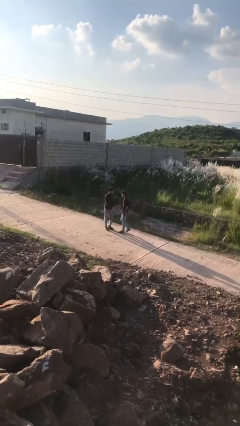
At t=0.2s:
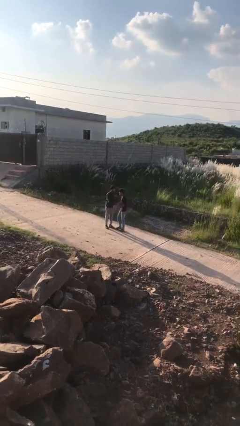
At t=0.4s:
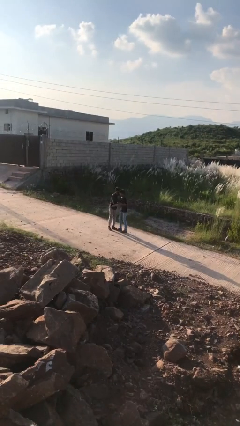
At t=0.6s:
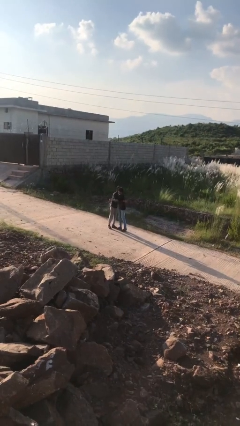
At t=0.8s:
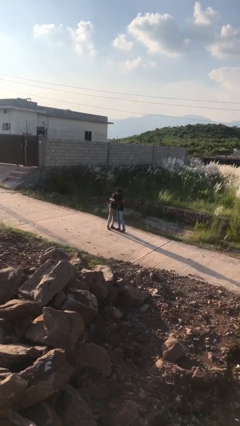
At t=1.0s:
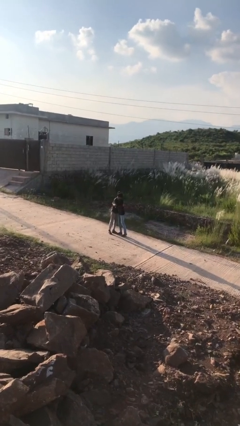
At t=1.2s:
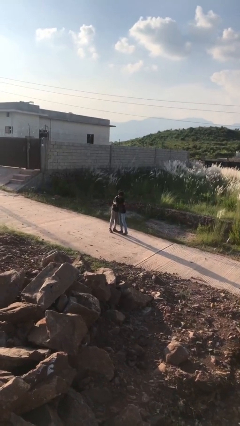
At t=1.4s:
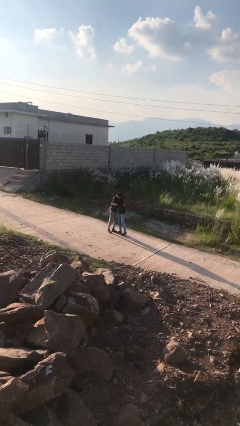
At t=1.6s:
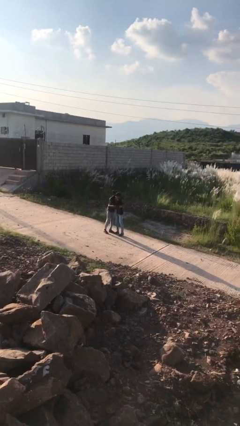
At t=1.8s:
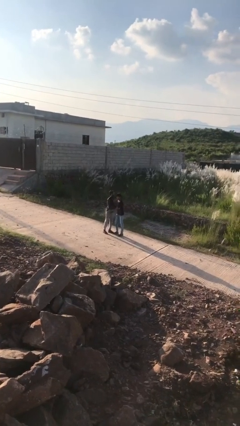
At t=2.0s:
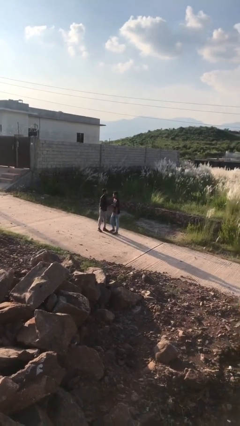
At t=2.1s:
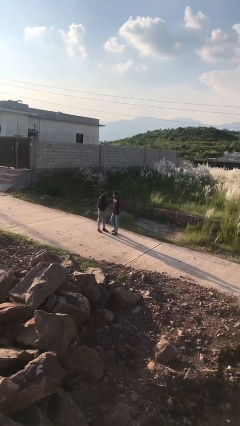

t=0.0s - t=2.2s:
person embraces person

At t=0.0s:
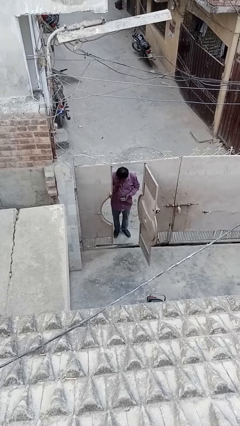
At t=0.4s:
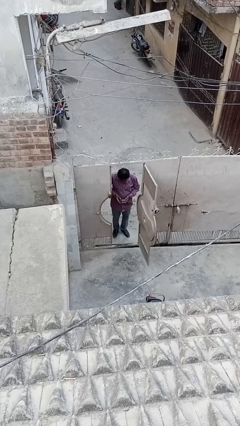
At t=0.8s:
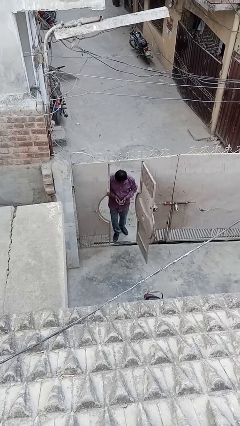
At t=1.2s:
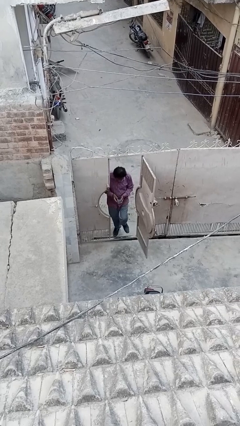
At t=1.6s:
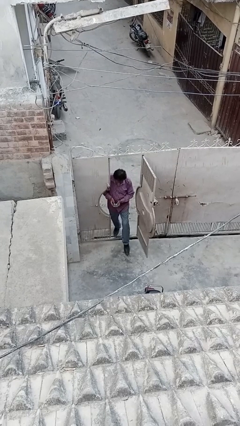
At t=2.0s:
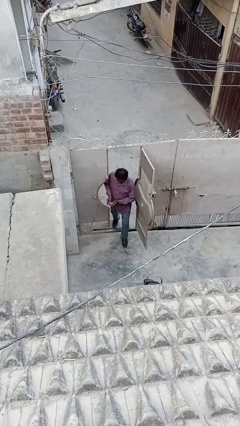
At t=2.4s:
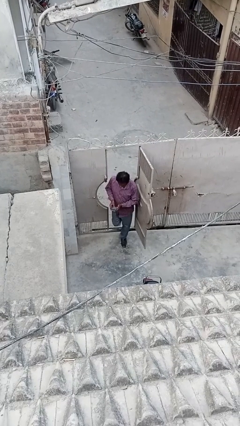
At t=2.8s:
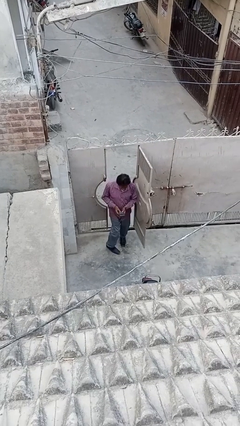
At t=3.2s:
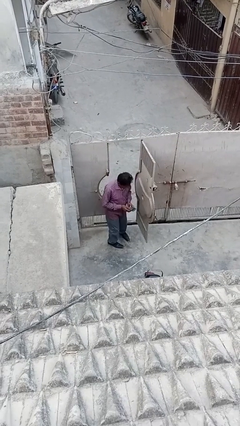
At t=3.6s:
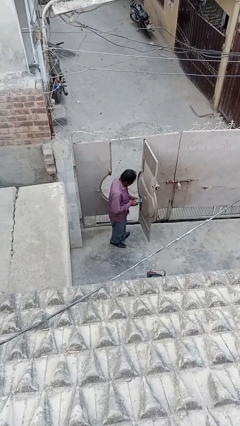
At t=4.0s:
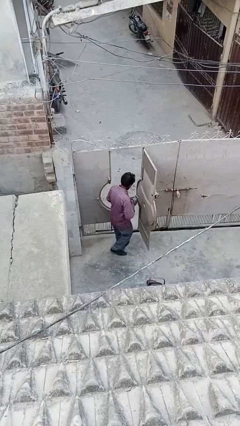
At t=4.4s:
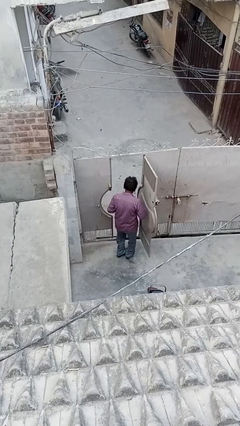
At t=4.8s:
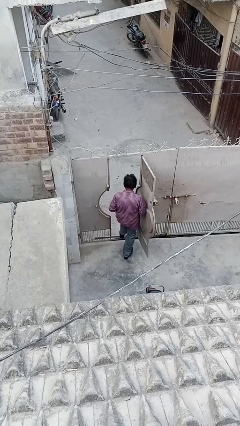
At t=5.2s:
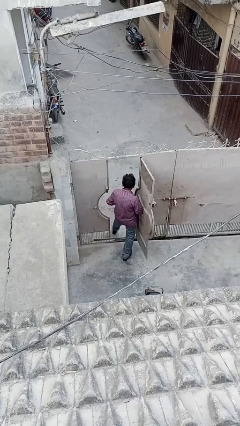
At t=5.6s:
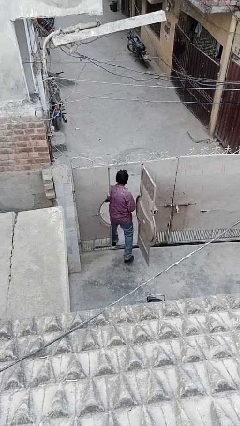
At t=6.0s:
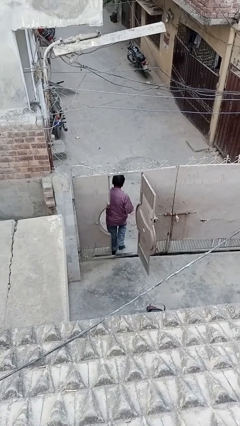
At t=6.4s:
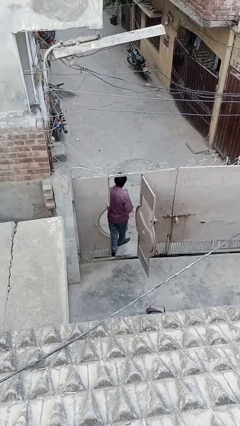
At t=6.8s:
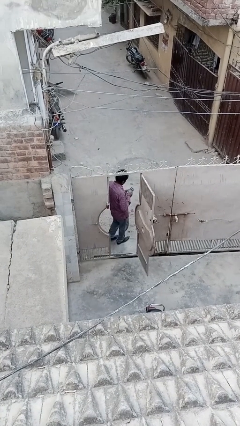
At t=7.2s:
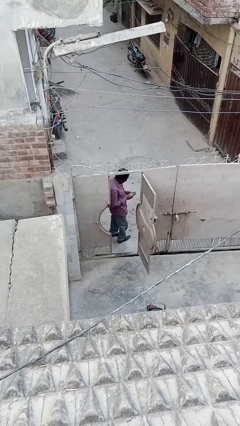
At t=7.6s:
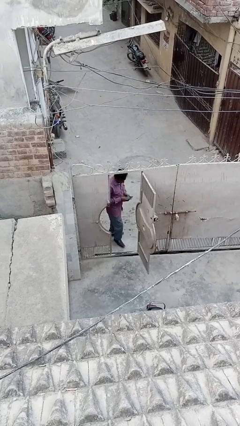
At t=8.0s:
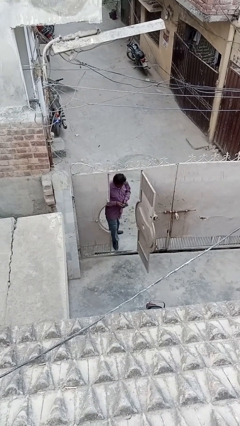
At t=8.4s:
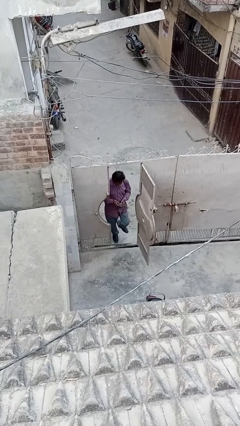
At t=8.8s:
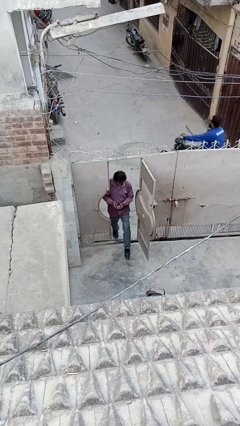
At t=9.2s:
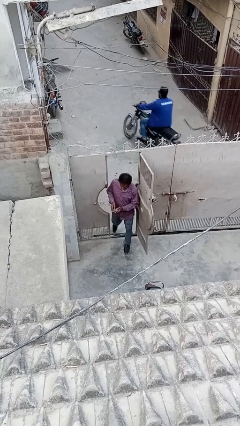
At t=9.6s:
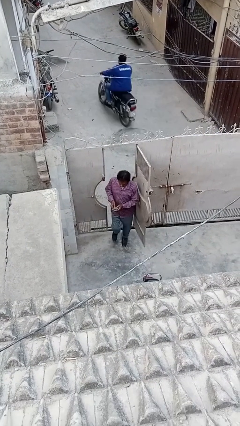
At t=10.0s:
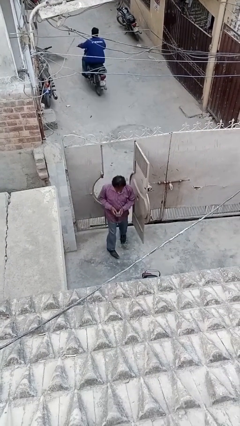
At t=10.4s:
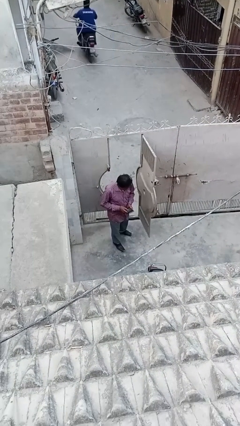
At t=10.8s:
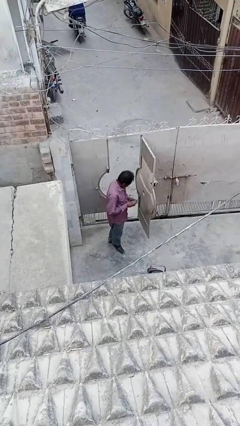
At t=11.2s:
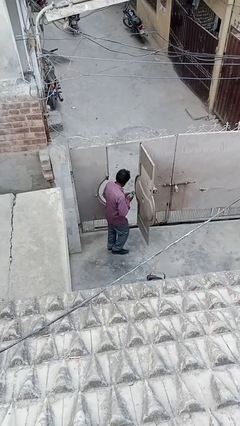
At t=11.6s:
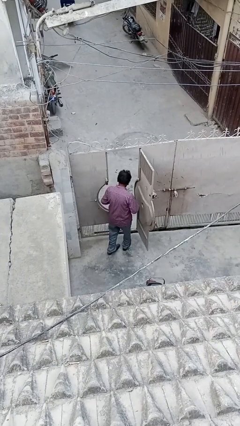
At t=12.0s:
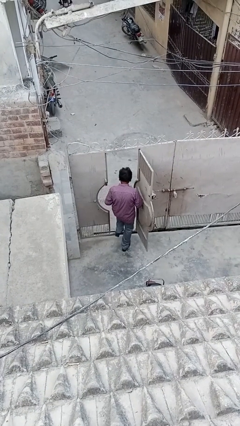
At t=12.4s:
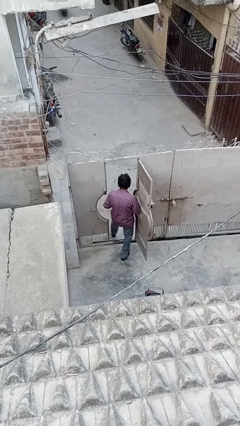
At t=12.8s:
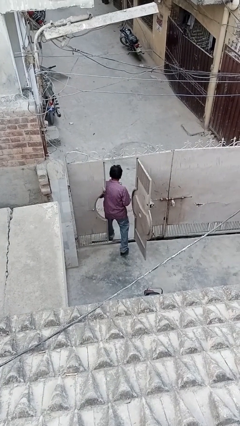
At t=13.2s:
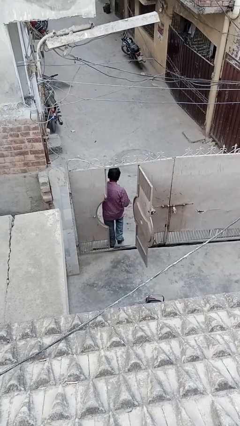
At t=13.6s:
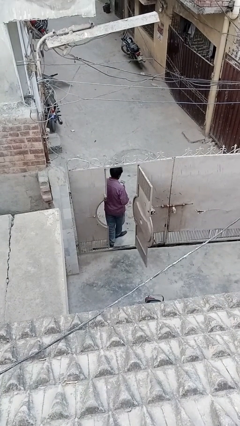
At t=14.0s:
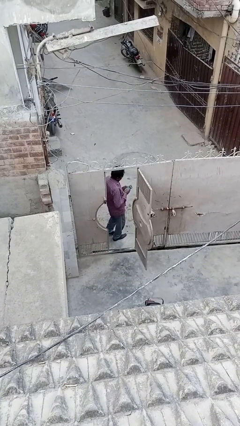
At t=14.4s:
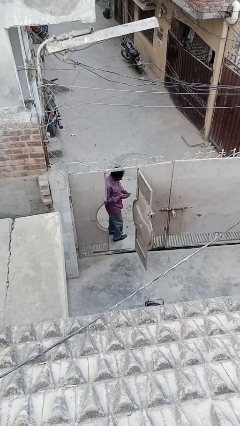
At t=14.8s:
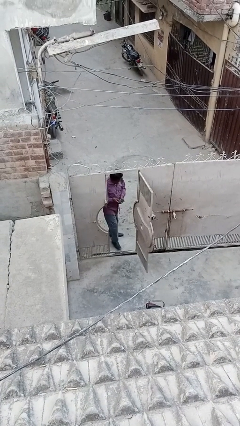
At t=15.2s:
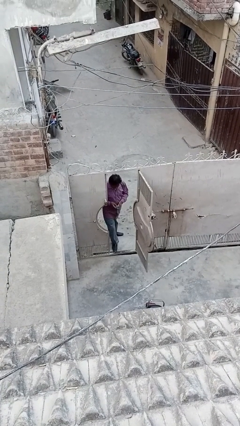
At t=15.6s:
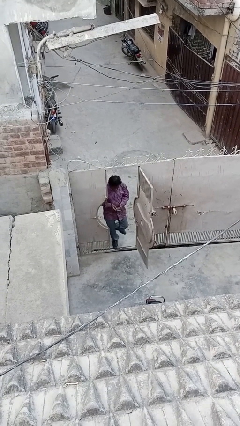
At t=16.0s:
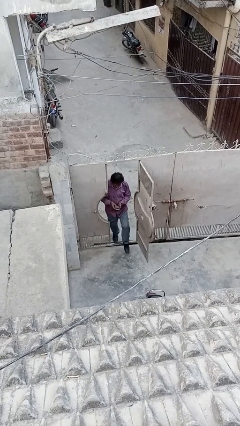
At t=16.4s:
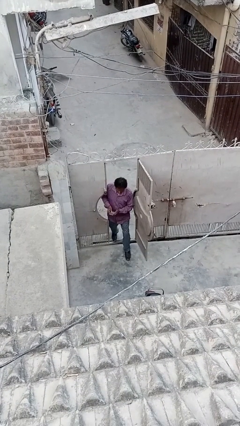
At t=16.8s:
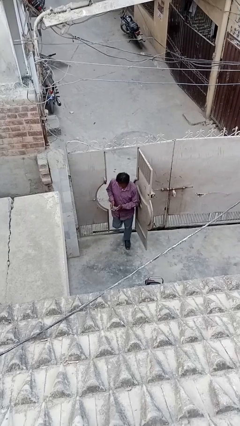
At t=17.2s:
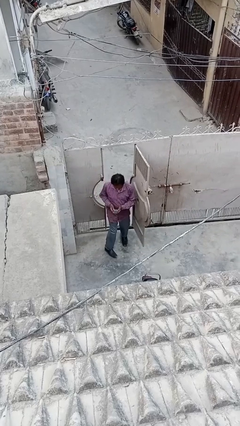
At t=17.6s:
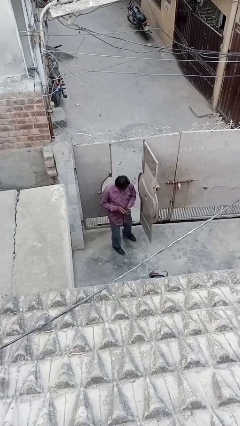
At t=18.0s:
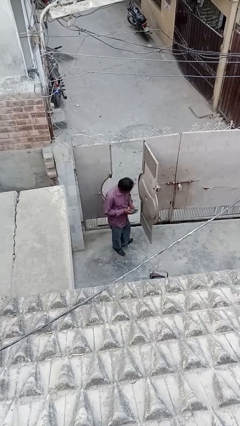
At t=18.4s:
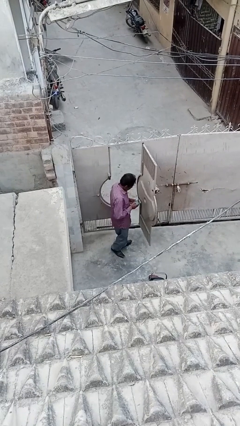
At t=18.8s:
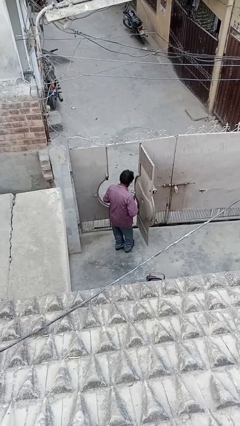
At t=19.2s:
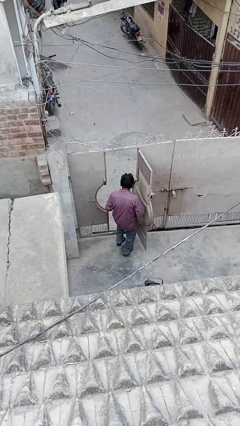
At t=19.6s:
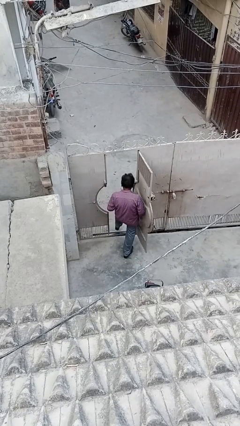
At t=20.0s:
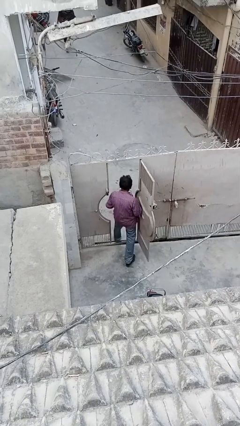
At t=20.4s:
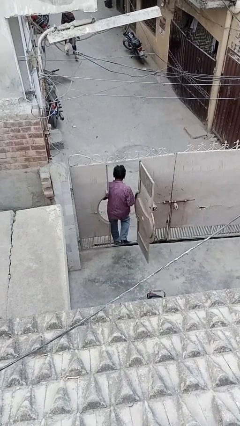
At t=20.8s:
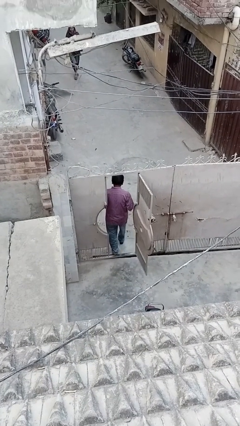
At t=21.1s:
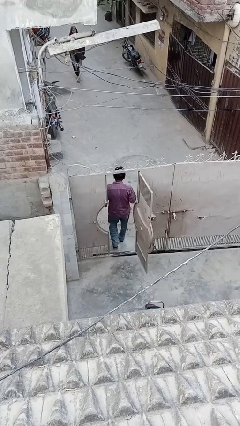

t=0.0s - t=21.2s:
person texts on phone

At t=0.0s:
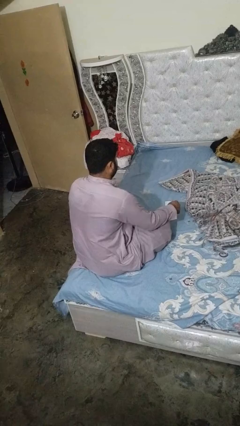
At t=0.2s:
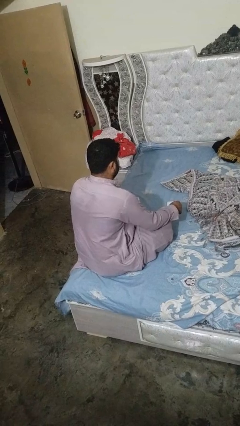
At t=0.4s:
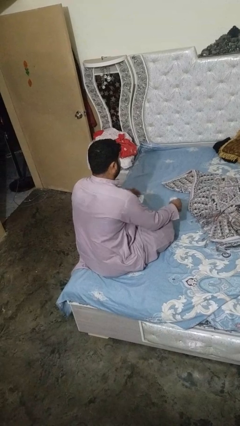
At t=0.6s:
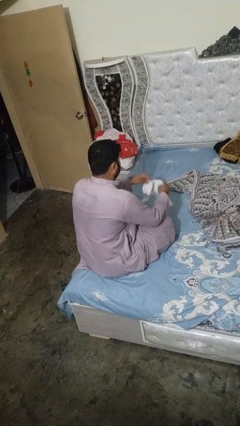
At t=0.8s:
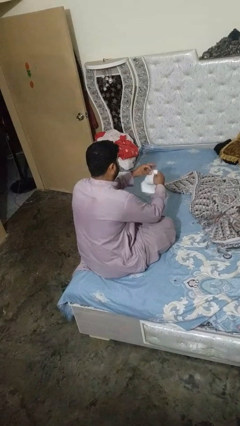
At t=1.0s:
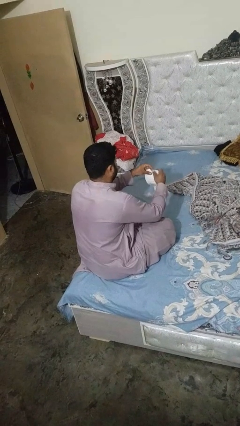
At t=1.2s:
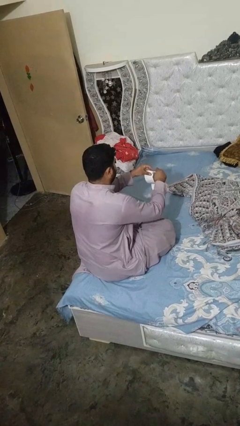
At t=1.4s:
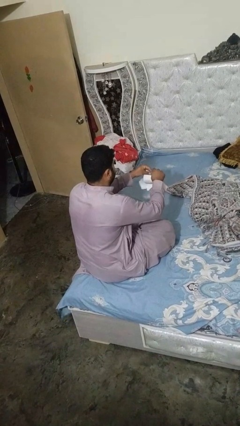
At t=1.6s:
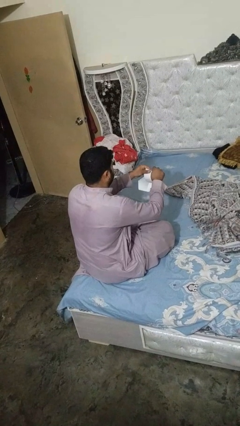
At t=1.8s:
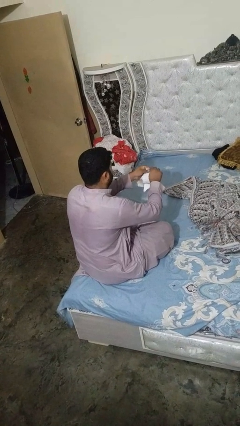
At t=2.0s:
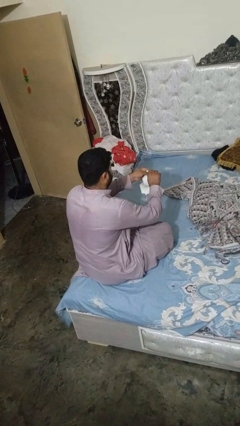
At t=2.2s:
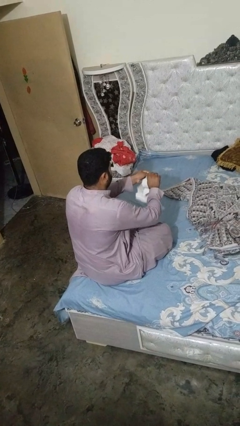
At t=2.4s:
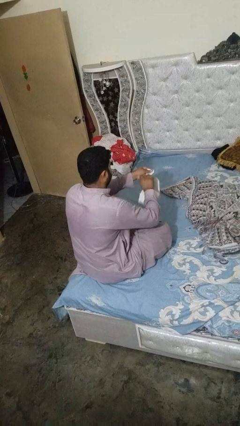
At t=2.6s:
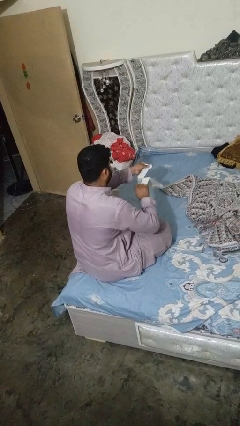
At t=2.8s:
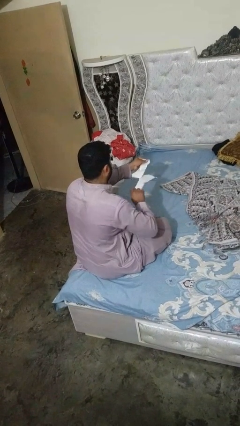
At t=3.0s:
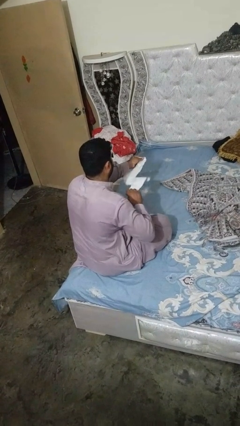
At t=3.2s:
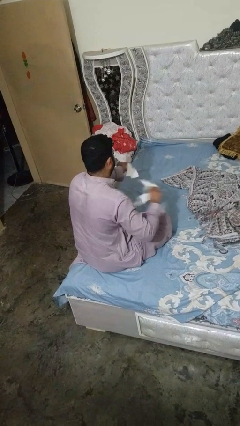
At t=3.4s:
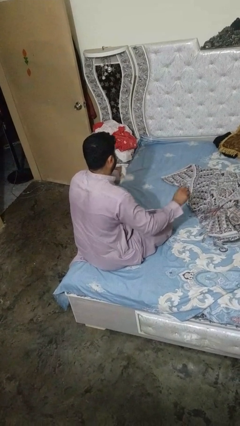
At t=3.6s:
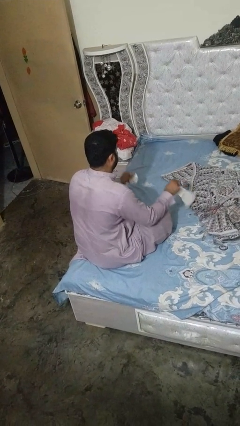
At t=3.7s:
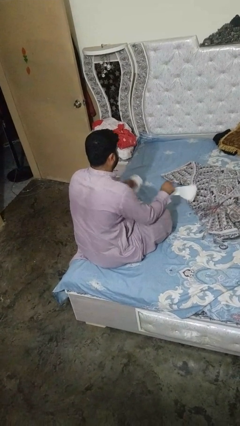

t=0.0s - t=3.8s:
person tears paper

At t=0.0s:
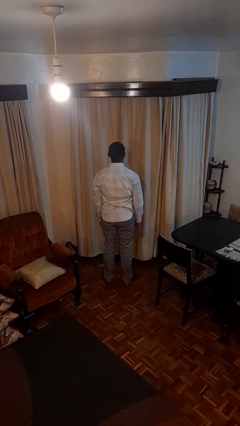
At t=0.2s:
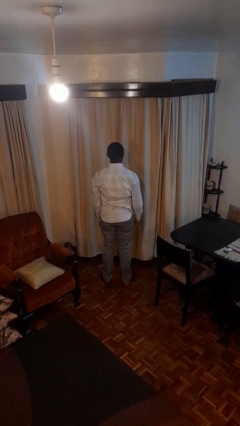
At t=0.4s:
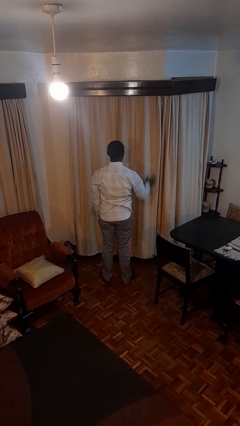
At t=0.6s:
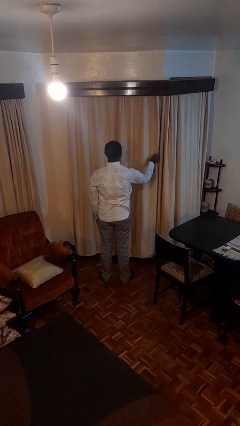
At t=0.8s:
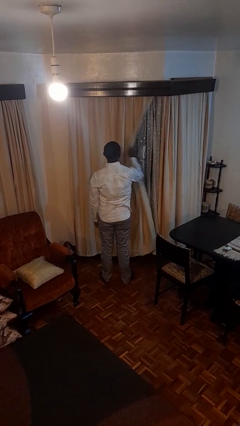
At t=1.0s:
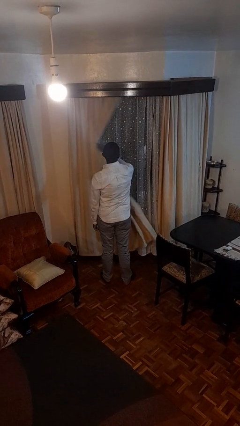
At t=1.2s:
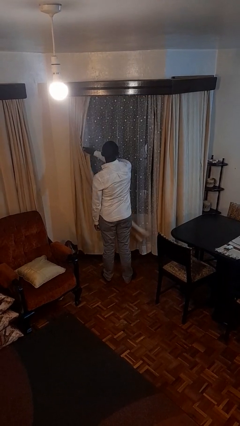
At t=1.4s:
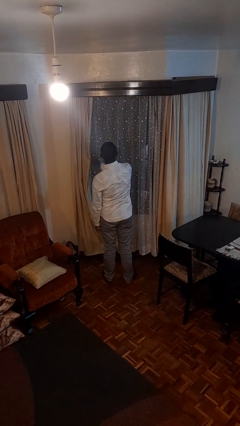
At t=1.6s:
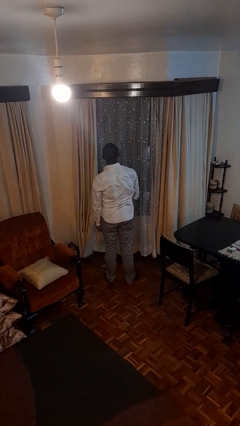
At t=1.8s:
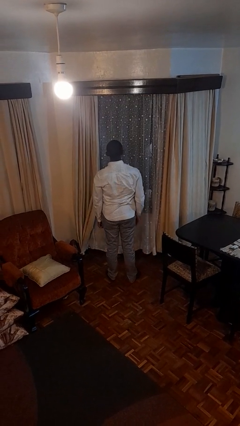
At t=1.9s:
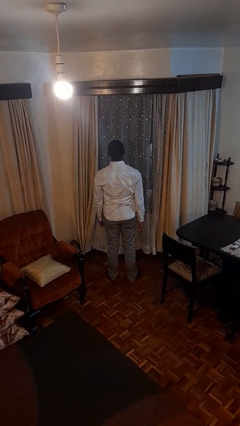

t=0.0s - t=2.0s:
person opens curtains
